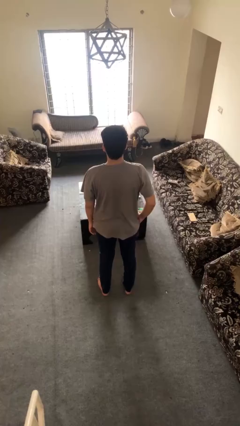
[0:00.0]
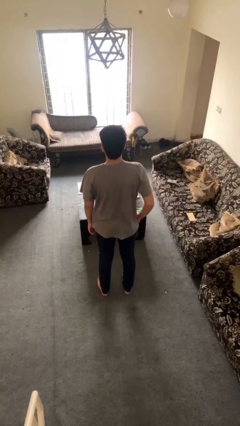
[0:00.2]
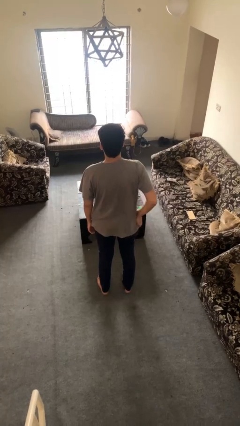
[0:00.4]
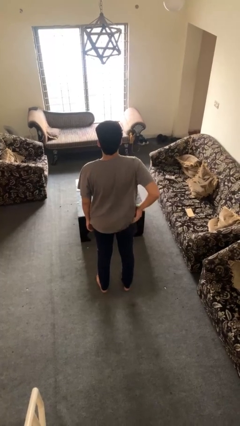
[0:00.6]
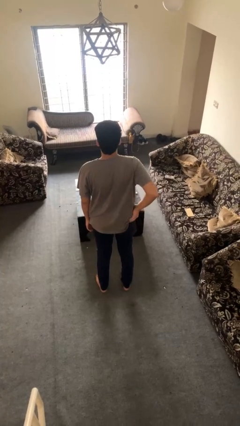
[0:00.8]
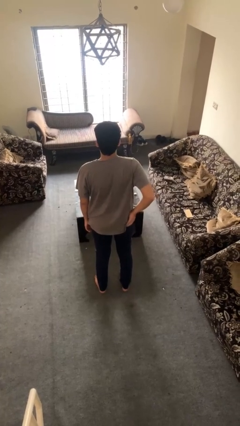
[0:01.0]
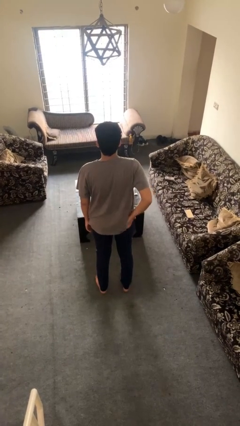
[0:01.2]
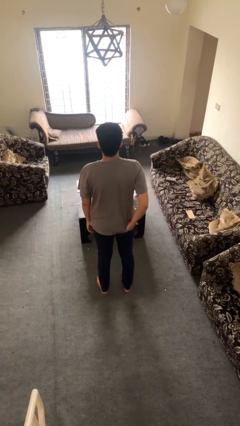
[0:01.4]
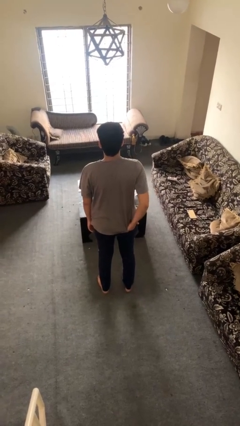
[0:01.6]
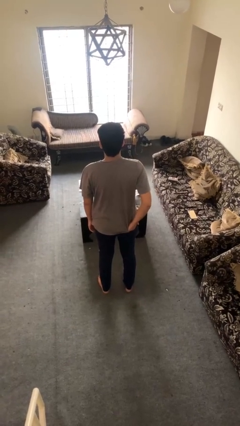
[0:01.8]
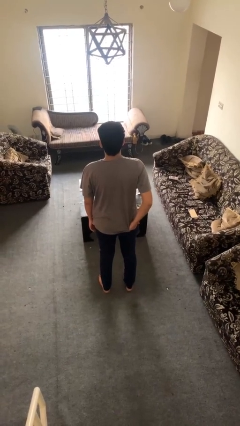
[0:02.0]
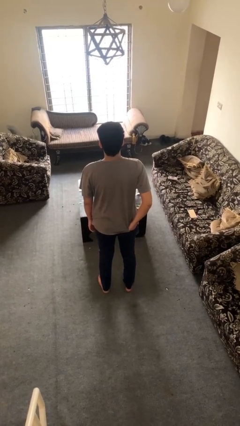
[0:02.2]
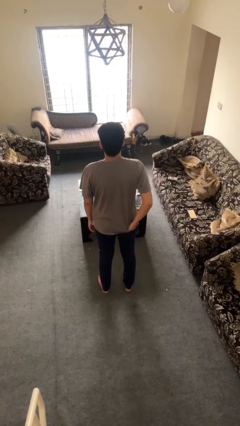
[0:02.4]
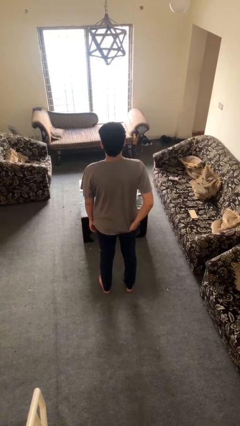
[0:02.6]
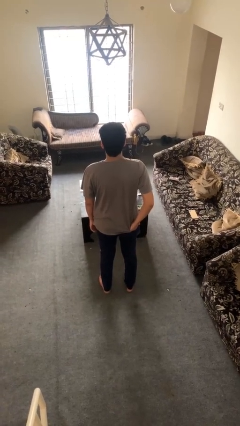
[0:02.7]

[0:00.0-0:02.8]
person puts hands in back pockets

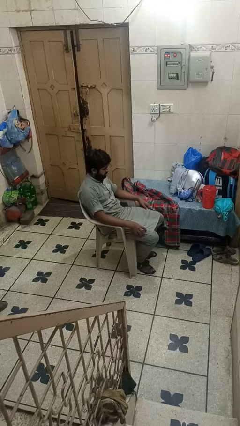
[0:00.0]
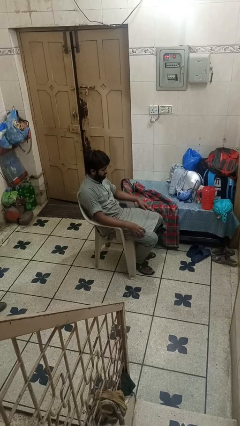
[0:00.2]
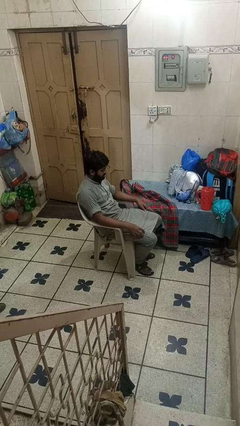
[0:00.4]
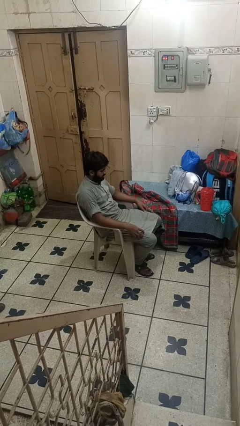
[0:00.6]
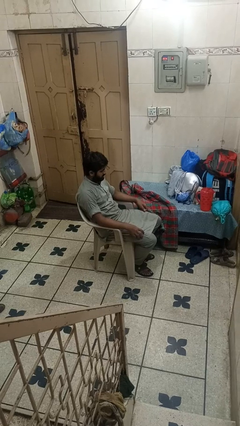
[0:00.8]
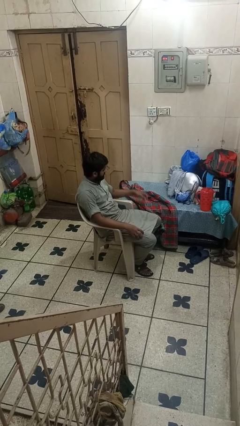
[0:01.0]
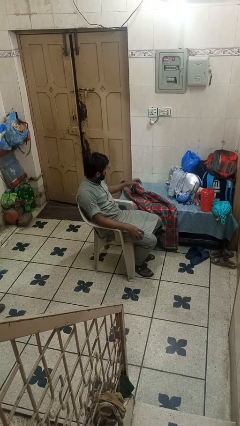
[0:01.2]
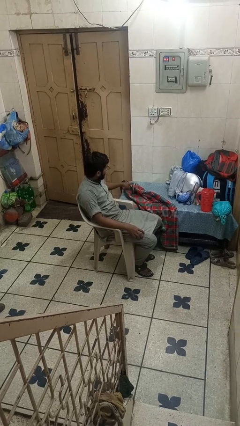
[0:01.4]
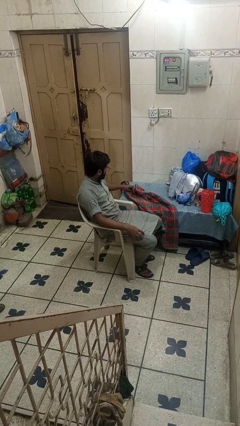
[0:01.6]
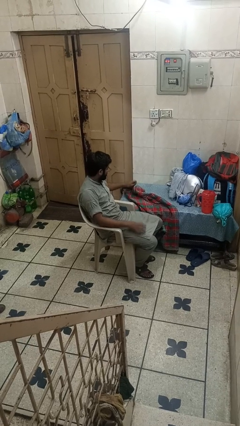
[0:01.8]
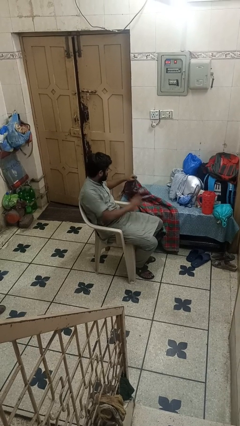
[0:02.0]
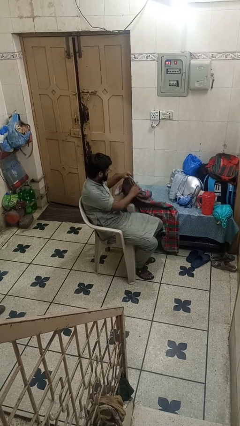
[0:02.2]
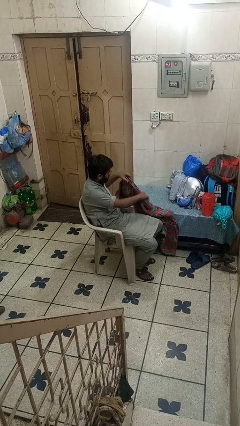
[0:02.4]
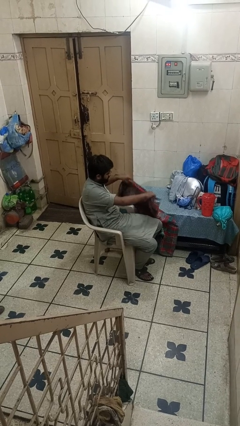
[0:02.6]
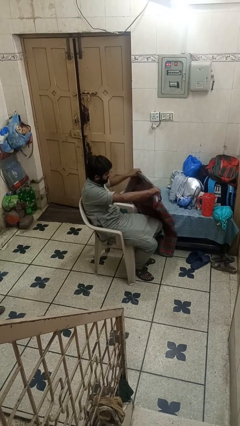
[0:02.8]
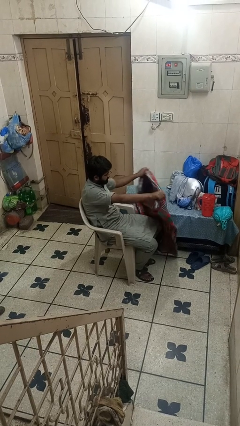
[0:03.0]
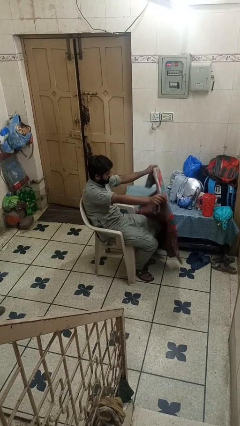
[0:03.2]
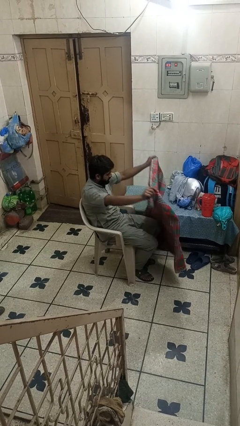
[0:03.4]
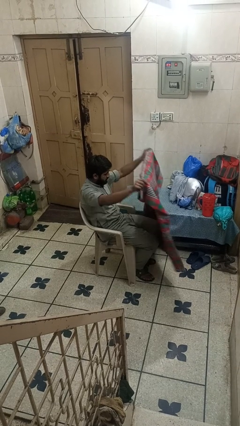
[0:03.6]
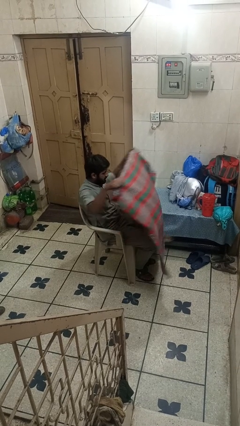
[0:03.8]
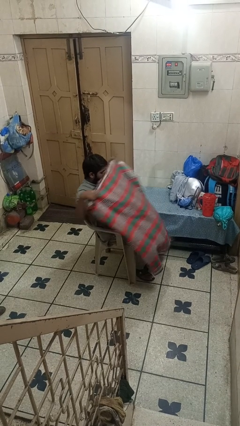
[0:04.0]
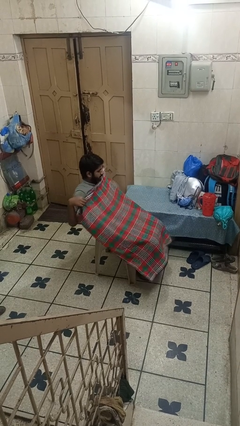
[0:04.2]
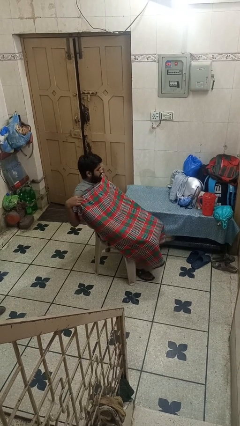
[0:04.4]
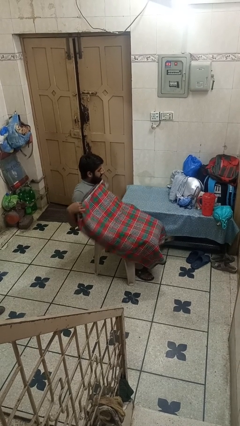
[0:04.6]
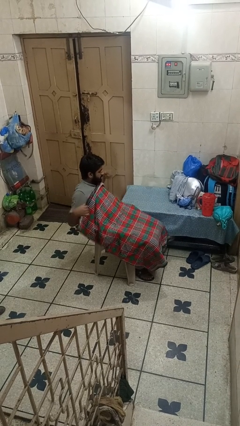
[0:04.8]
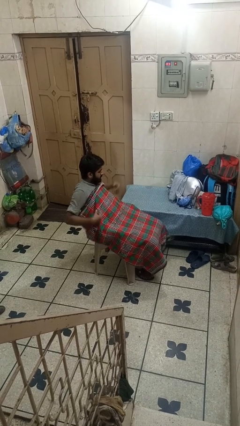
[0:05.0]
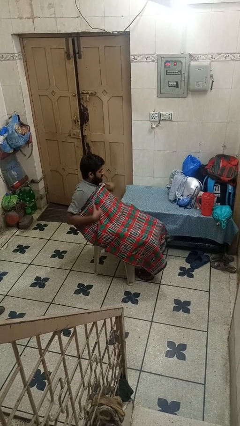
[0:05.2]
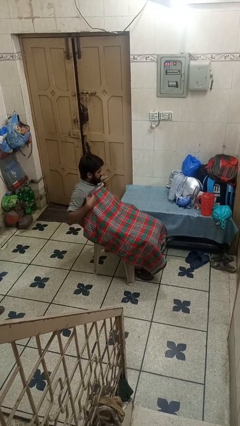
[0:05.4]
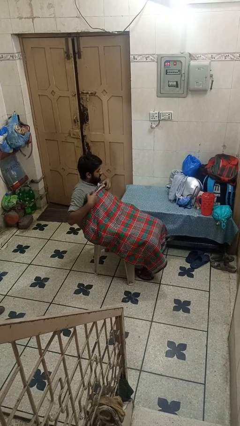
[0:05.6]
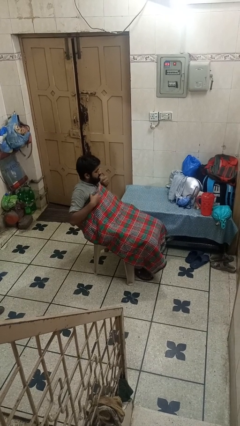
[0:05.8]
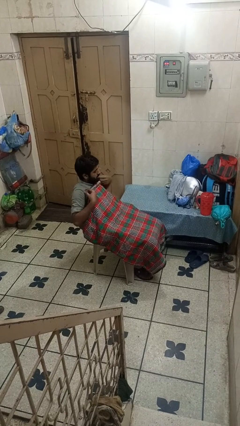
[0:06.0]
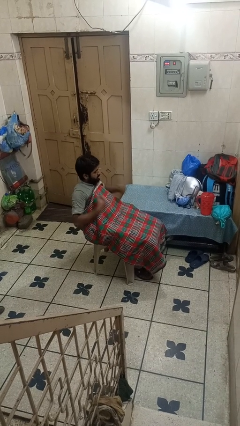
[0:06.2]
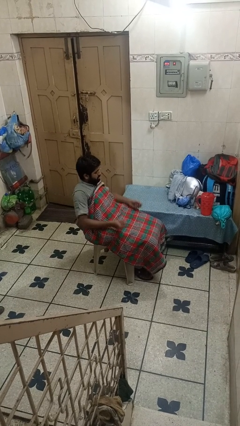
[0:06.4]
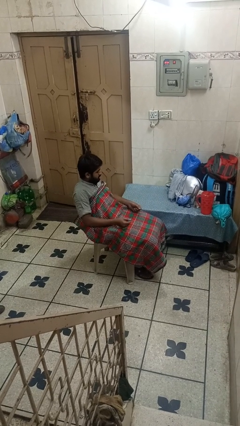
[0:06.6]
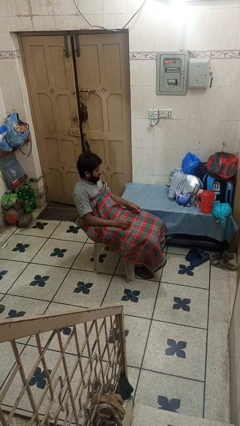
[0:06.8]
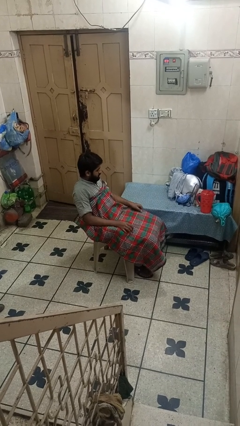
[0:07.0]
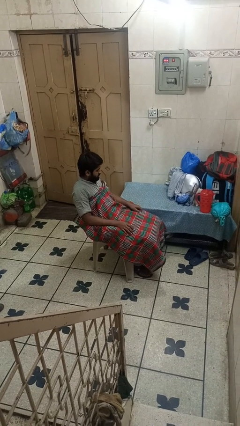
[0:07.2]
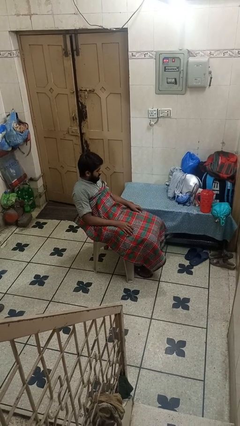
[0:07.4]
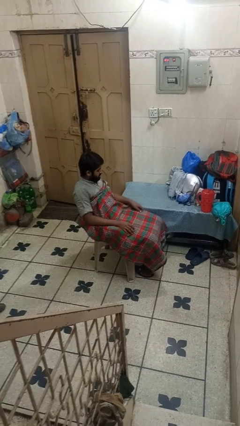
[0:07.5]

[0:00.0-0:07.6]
person covers with blanket

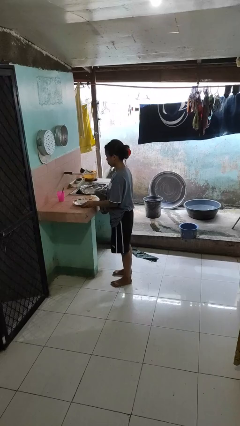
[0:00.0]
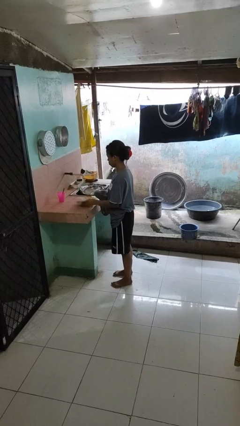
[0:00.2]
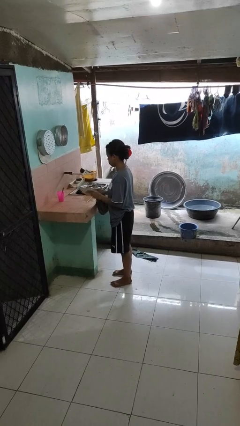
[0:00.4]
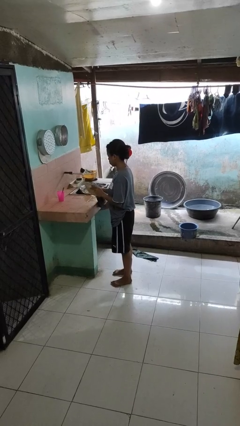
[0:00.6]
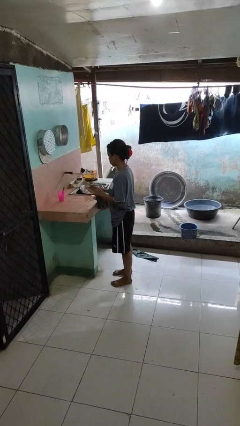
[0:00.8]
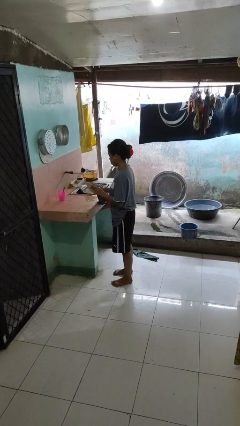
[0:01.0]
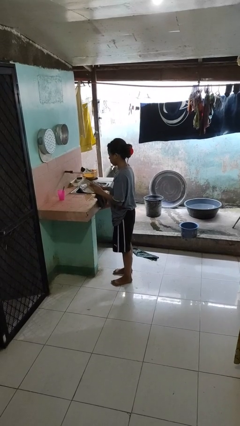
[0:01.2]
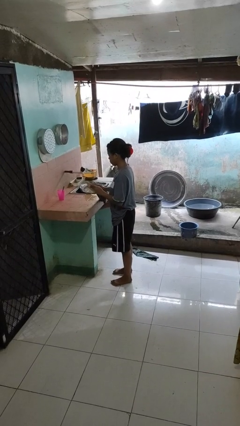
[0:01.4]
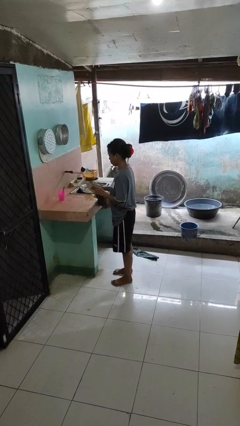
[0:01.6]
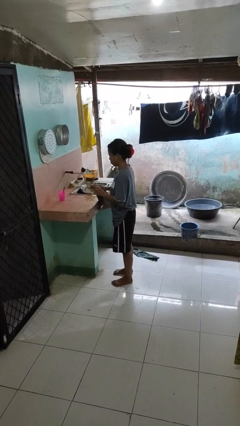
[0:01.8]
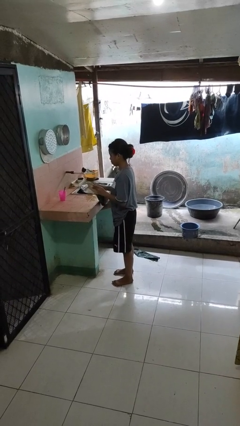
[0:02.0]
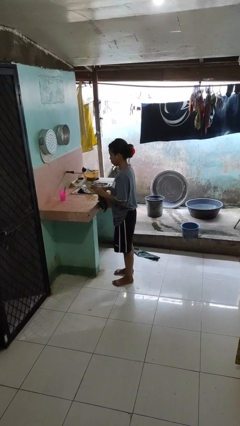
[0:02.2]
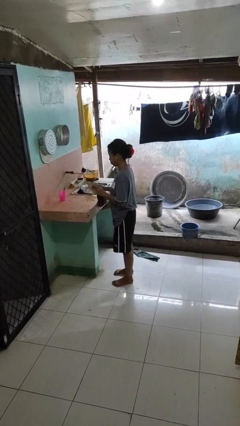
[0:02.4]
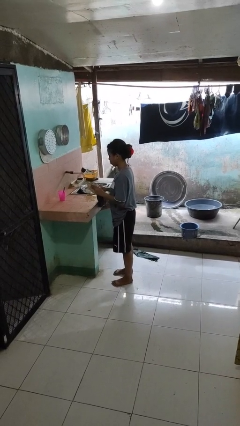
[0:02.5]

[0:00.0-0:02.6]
person dries dish

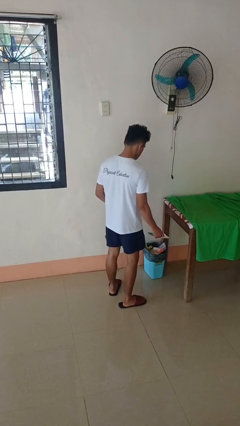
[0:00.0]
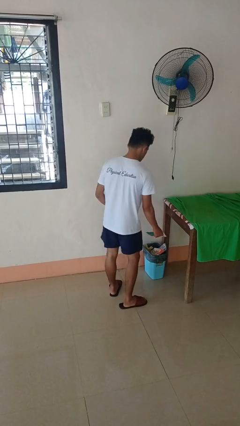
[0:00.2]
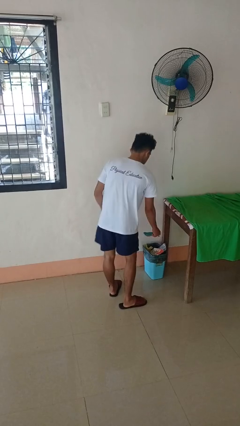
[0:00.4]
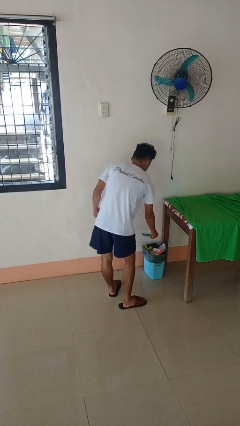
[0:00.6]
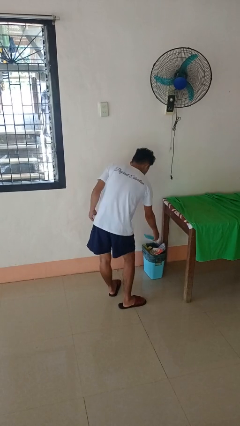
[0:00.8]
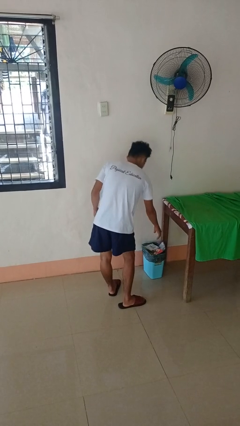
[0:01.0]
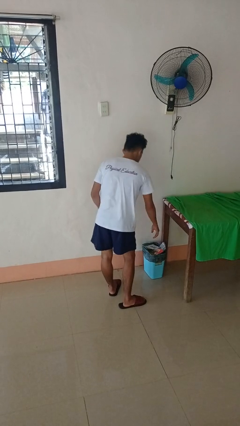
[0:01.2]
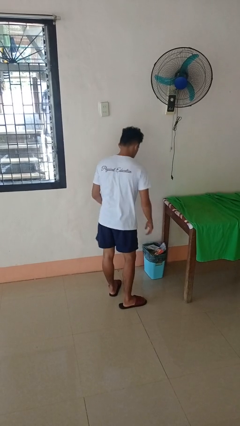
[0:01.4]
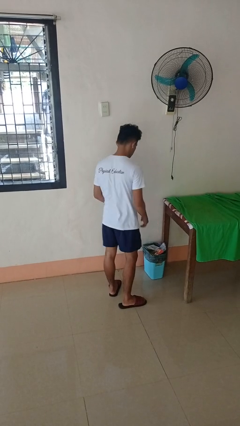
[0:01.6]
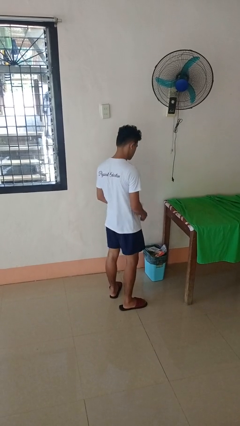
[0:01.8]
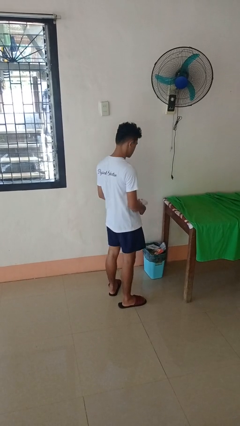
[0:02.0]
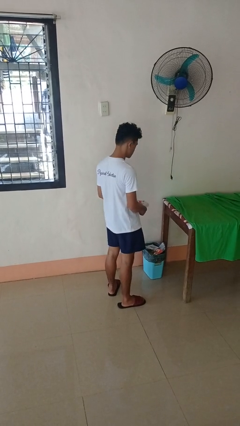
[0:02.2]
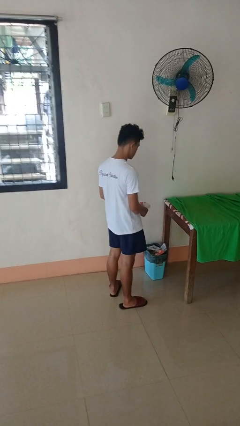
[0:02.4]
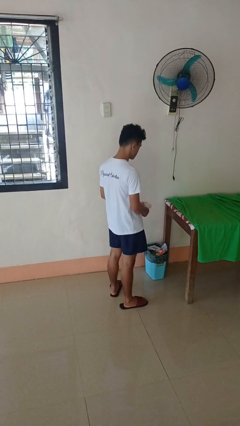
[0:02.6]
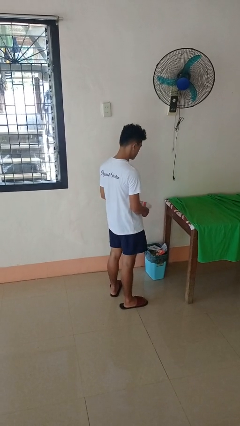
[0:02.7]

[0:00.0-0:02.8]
person discards trash

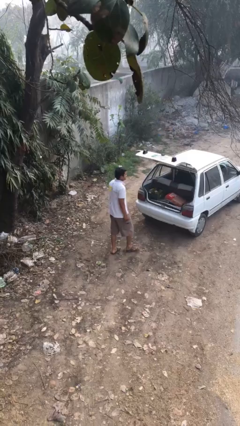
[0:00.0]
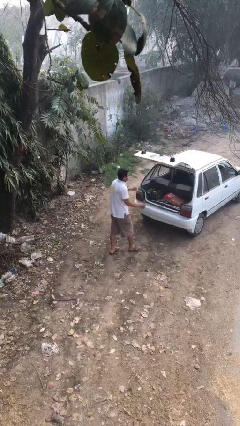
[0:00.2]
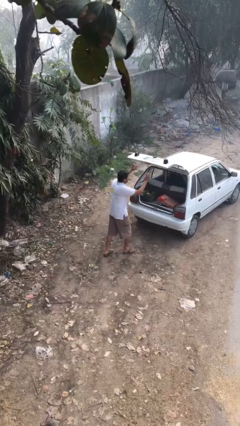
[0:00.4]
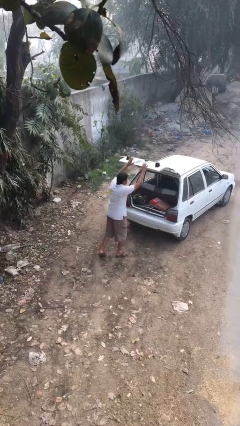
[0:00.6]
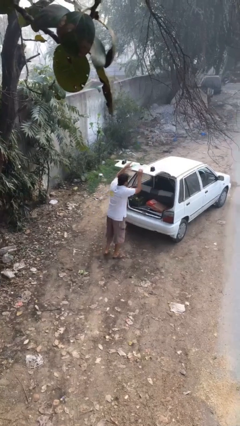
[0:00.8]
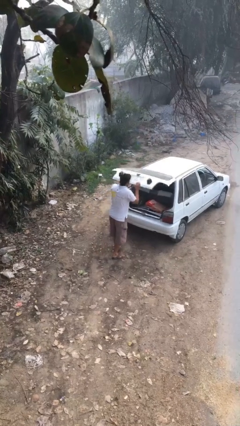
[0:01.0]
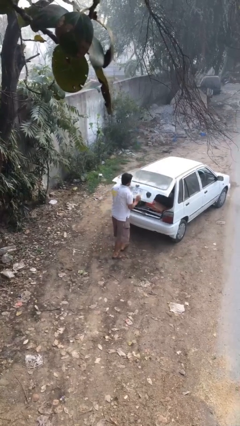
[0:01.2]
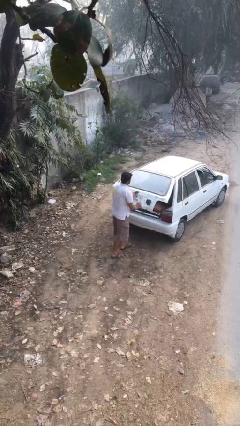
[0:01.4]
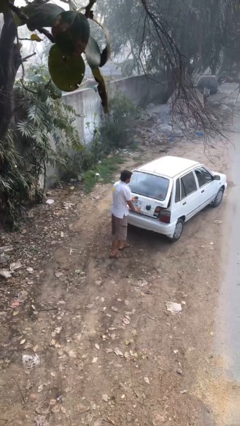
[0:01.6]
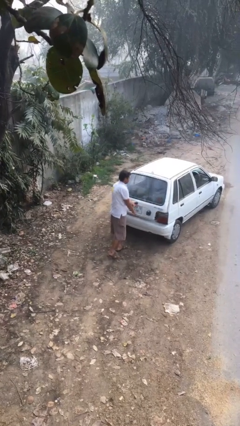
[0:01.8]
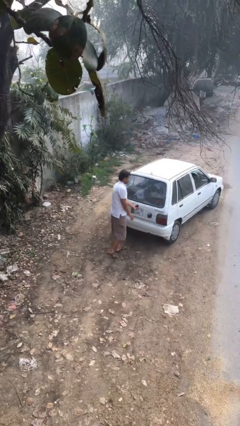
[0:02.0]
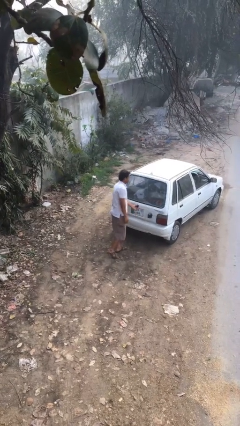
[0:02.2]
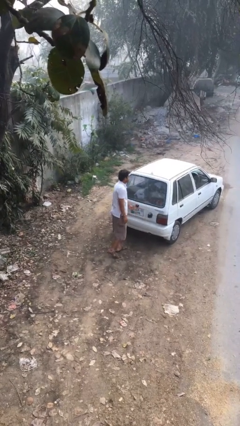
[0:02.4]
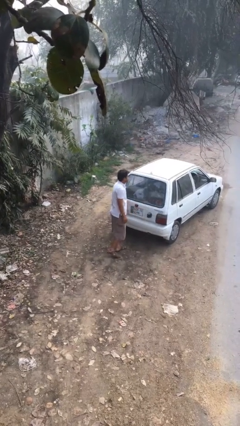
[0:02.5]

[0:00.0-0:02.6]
person closes car trunk
